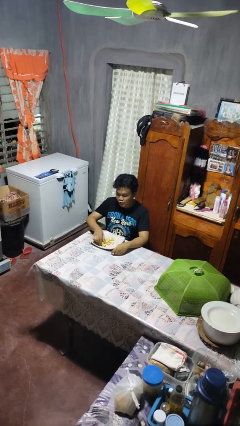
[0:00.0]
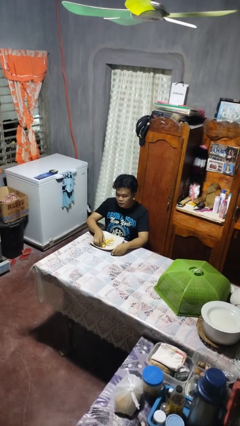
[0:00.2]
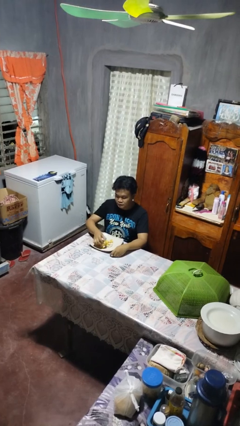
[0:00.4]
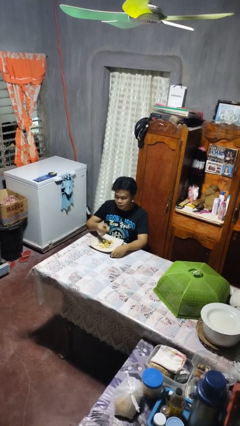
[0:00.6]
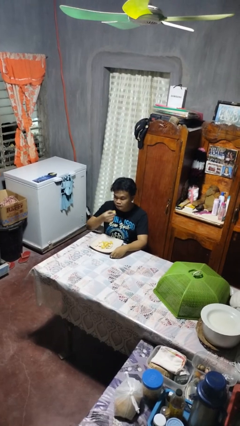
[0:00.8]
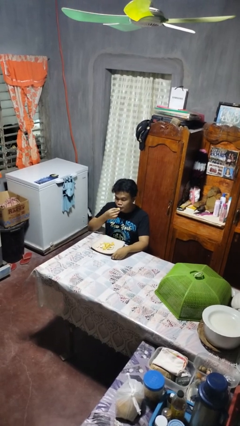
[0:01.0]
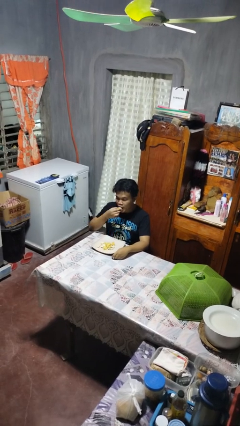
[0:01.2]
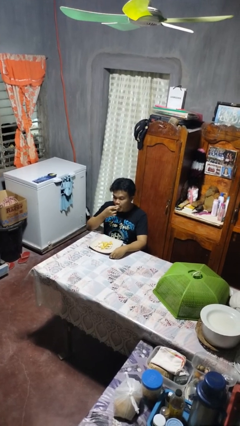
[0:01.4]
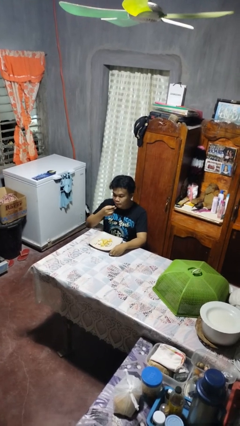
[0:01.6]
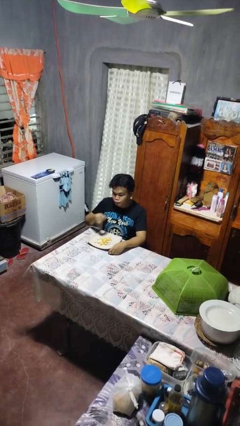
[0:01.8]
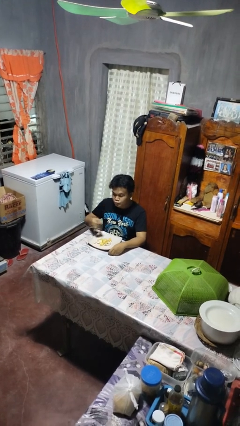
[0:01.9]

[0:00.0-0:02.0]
person eats with hands

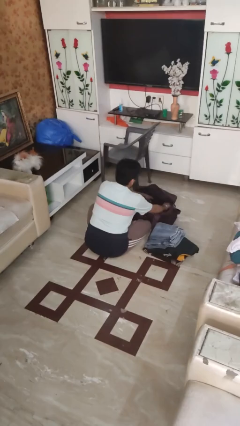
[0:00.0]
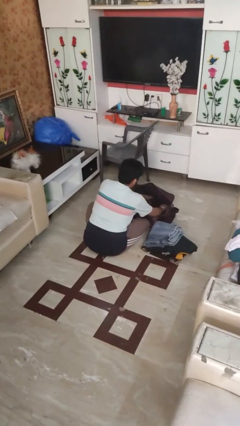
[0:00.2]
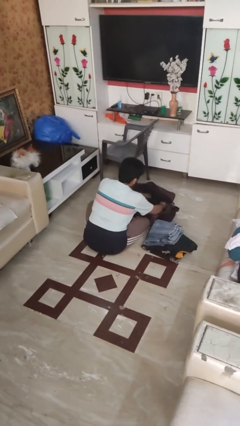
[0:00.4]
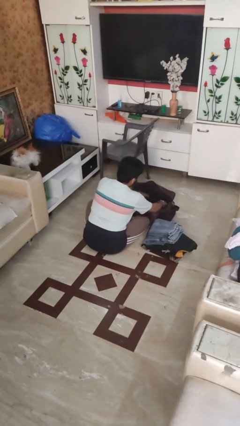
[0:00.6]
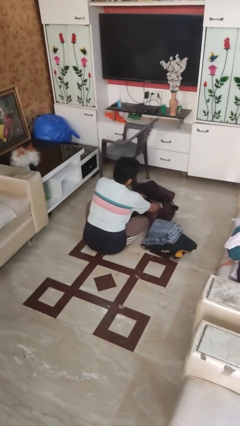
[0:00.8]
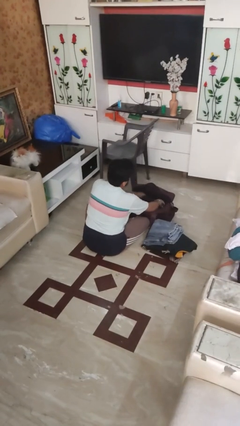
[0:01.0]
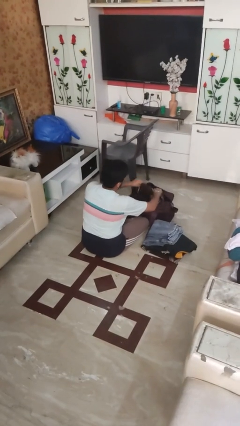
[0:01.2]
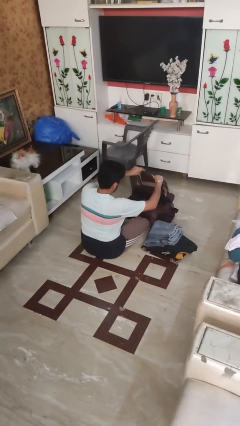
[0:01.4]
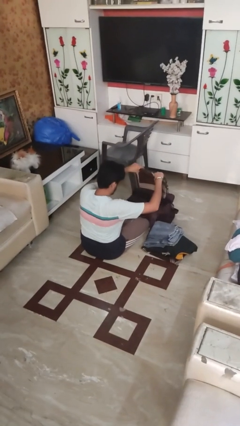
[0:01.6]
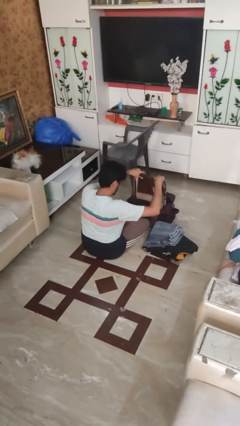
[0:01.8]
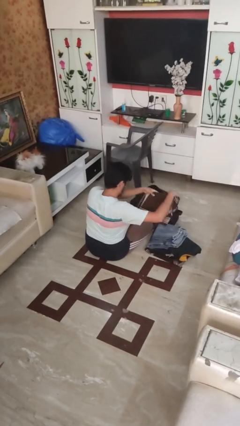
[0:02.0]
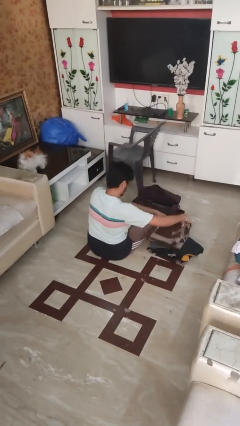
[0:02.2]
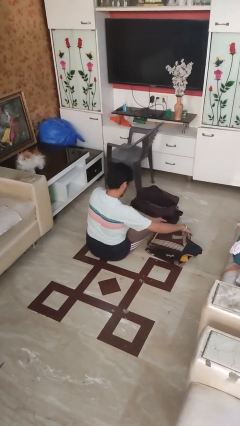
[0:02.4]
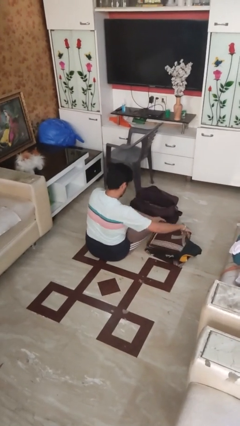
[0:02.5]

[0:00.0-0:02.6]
person unloads clothes from suitcase

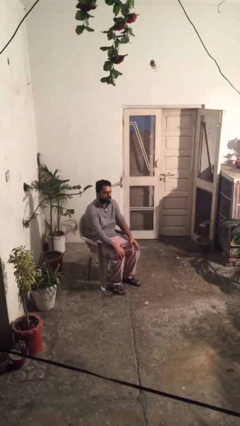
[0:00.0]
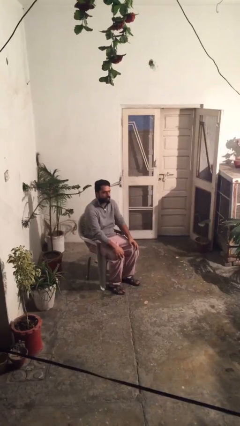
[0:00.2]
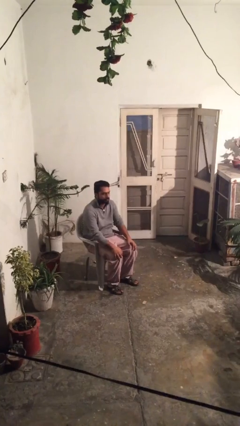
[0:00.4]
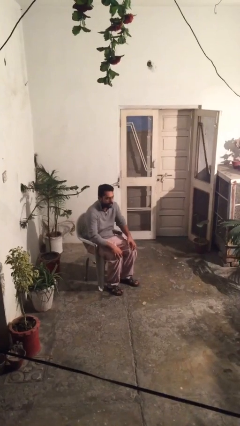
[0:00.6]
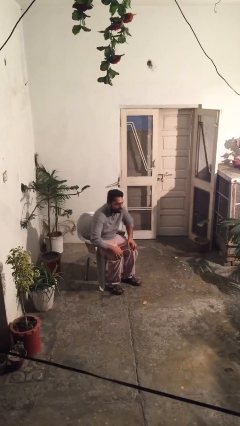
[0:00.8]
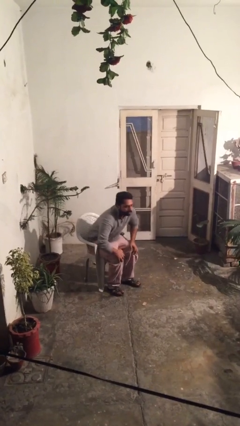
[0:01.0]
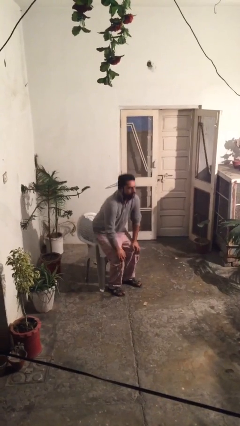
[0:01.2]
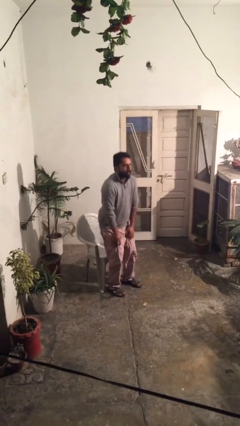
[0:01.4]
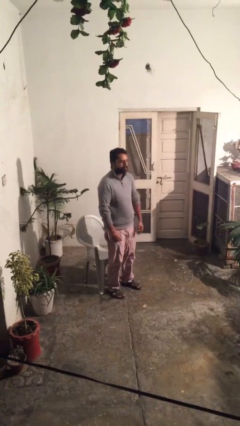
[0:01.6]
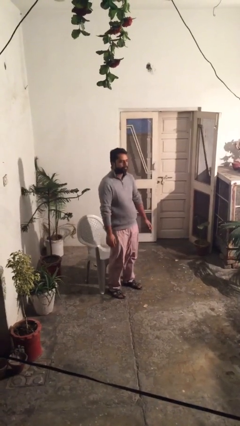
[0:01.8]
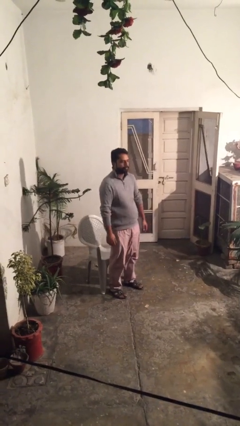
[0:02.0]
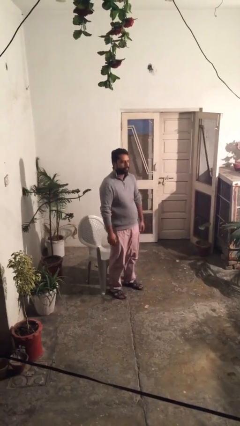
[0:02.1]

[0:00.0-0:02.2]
person stands up

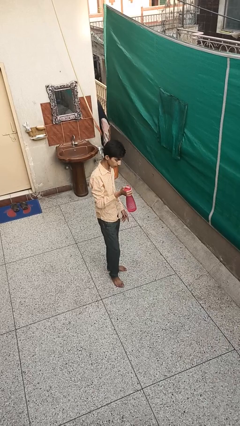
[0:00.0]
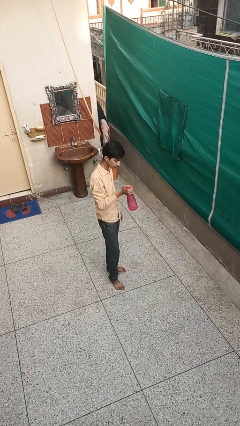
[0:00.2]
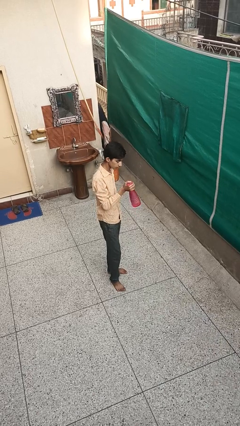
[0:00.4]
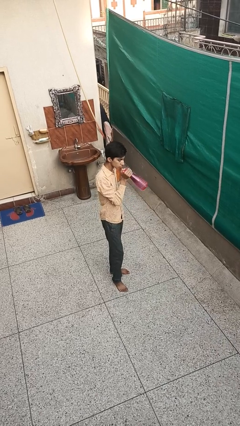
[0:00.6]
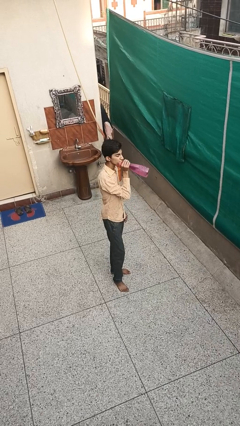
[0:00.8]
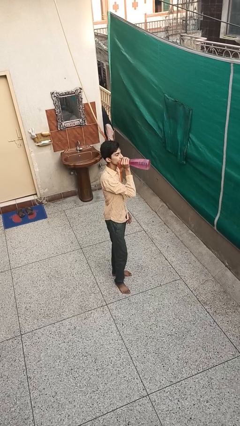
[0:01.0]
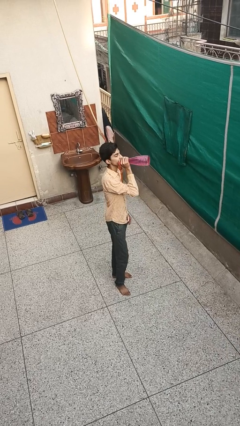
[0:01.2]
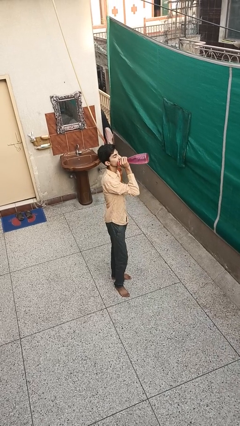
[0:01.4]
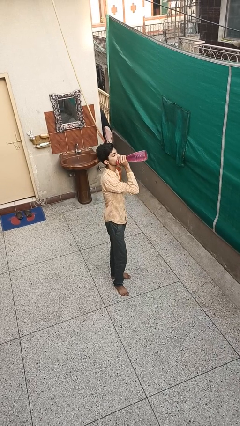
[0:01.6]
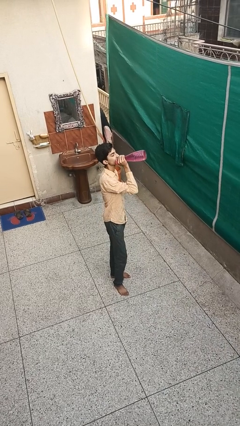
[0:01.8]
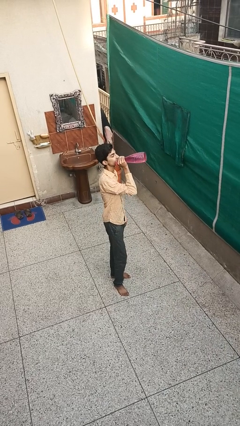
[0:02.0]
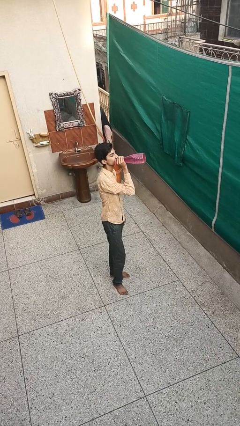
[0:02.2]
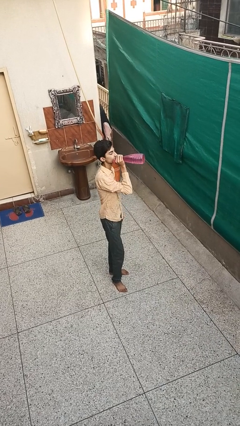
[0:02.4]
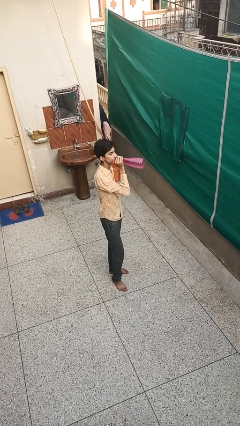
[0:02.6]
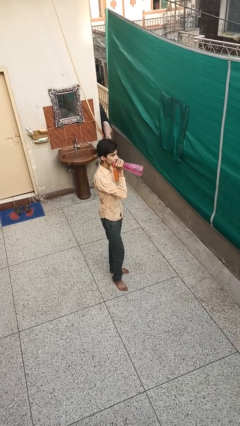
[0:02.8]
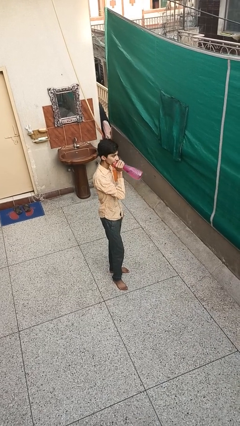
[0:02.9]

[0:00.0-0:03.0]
person drinks from bottle

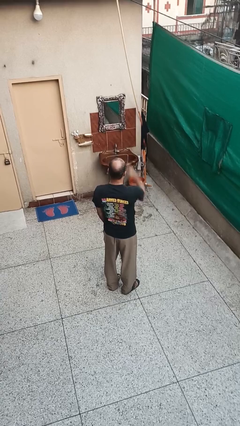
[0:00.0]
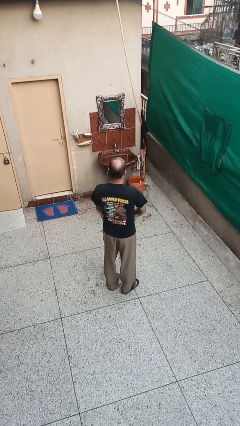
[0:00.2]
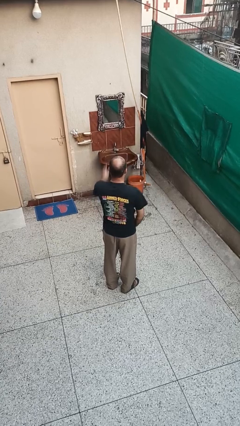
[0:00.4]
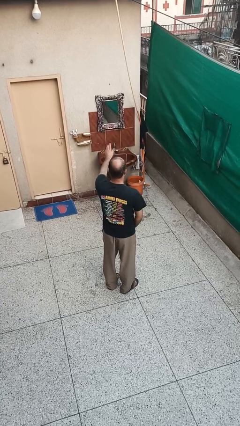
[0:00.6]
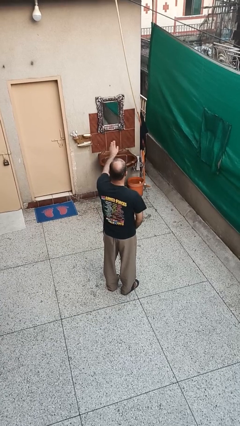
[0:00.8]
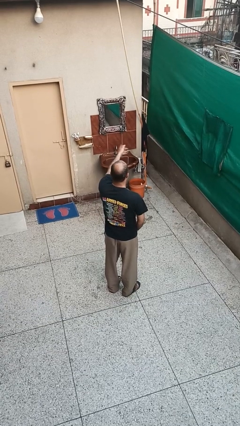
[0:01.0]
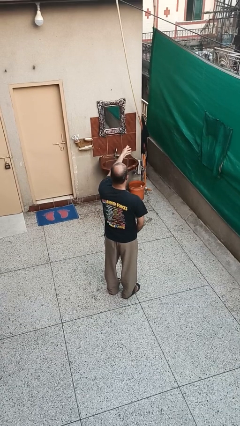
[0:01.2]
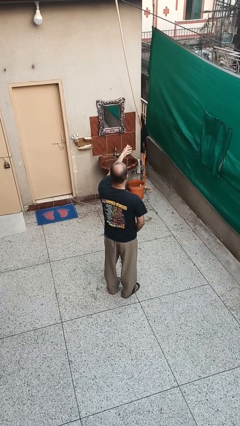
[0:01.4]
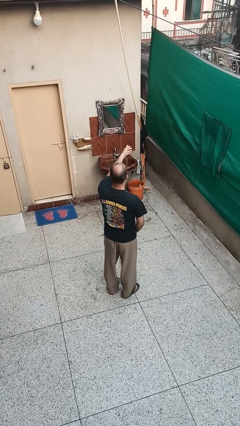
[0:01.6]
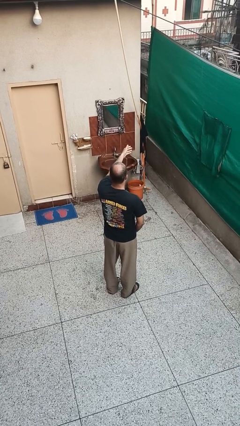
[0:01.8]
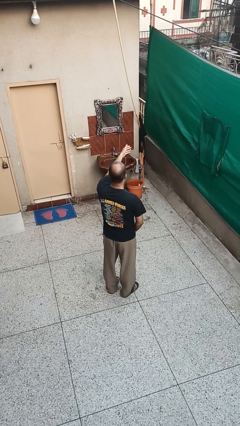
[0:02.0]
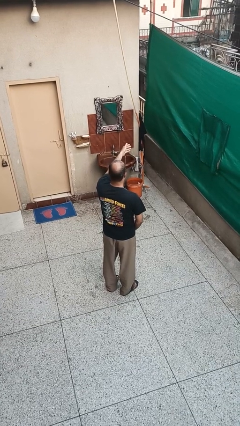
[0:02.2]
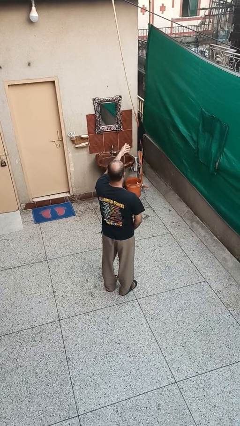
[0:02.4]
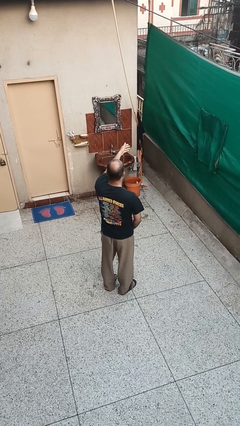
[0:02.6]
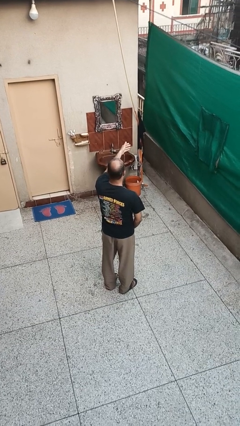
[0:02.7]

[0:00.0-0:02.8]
person gestures swipe right

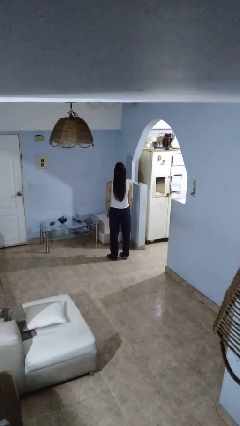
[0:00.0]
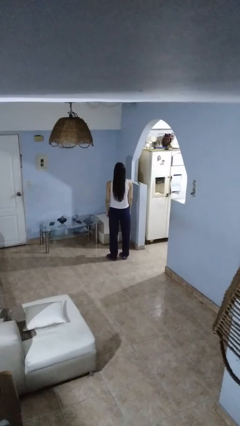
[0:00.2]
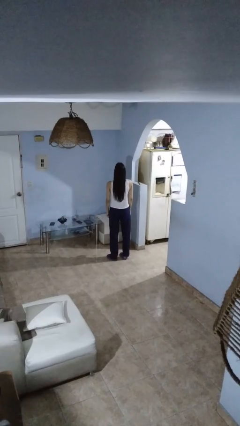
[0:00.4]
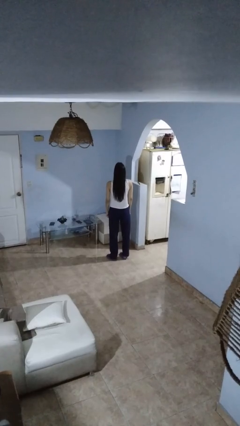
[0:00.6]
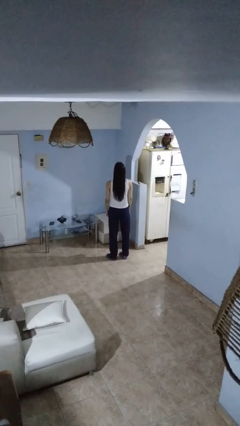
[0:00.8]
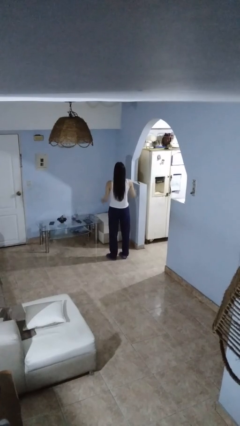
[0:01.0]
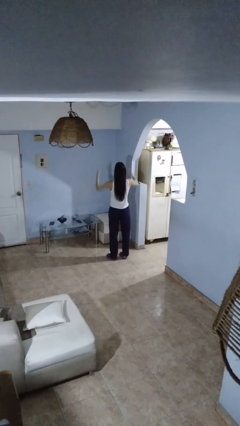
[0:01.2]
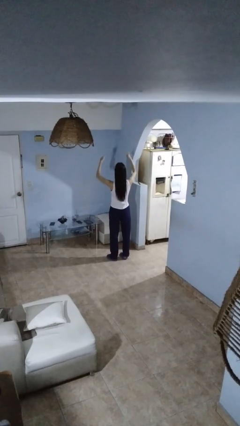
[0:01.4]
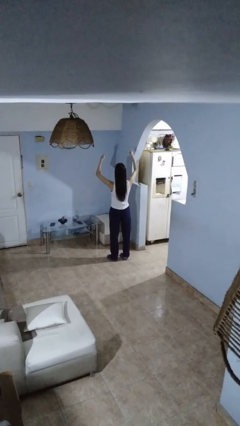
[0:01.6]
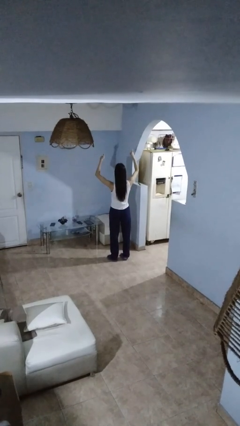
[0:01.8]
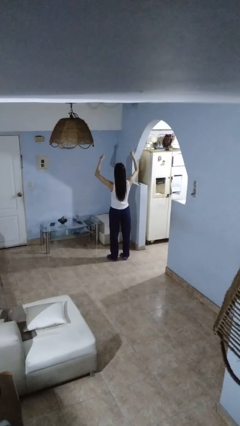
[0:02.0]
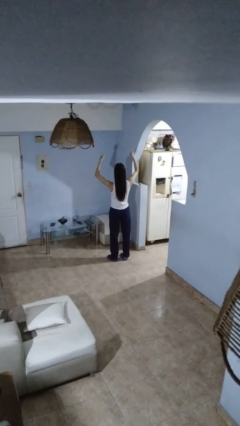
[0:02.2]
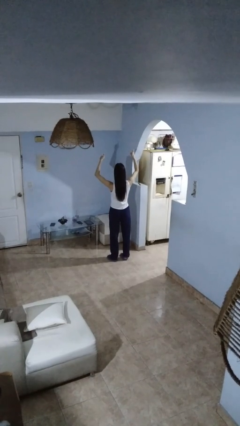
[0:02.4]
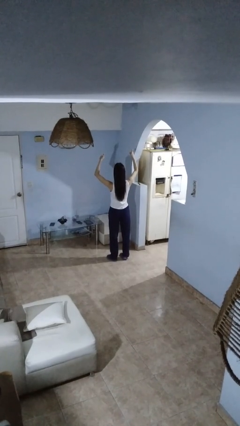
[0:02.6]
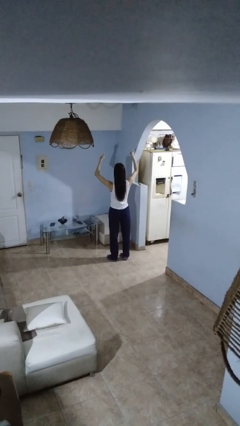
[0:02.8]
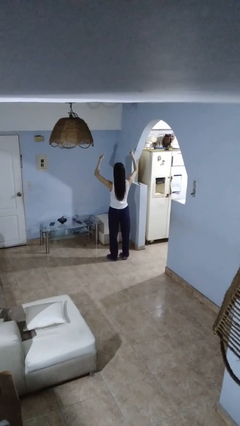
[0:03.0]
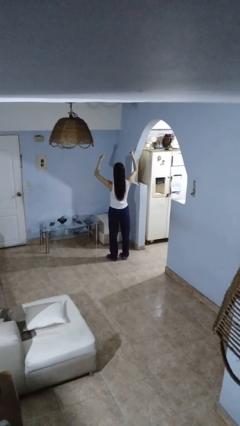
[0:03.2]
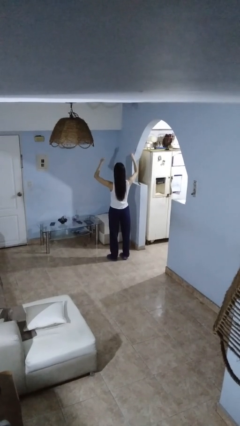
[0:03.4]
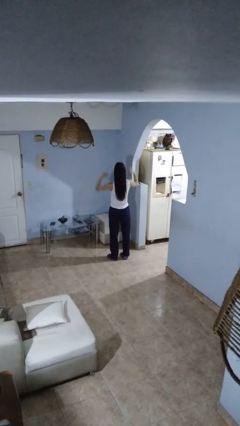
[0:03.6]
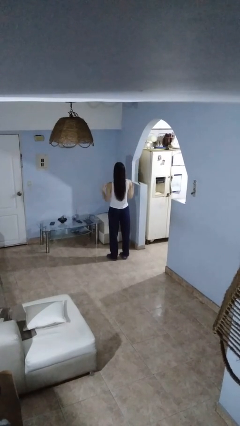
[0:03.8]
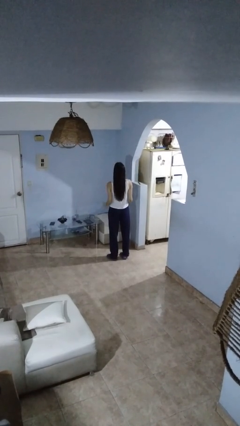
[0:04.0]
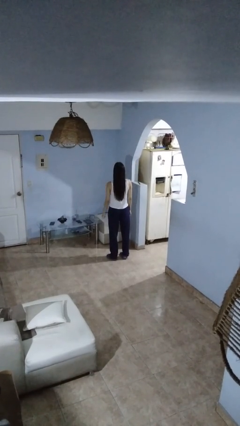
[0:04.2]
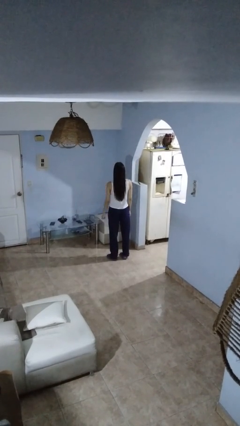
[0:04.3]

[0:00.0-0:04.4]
person gestures thumbs up

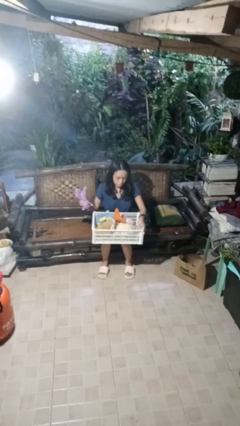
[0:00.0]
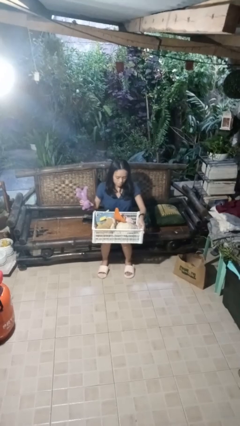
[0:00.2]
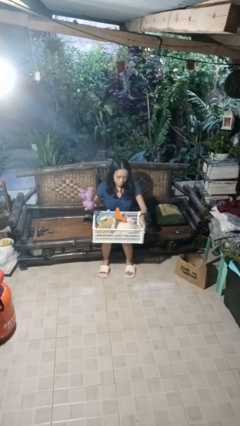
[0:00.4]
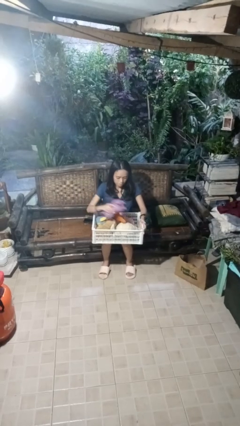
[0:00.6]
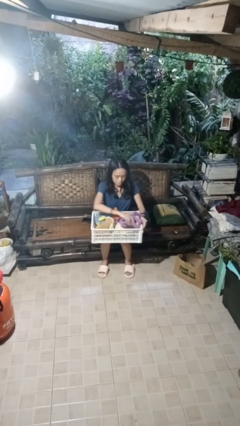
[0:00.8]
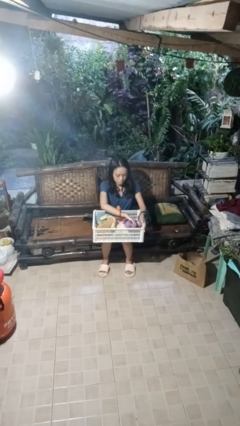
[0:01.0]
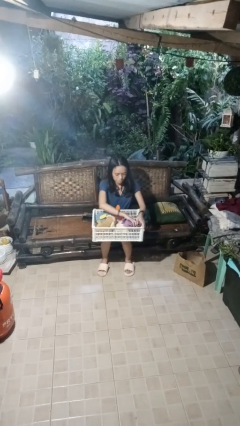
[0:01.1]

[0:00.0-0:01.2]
person puts object into basket
